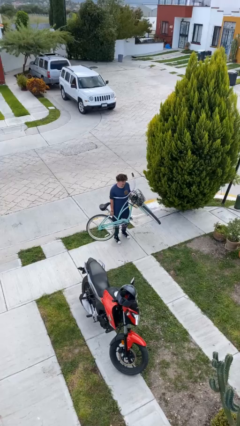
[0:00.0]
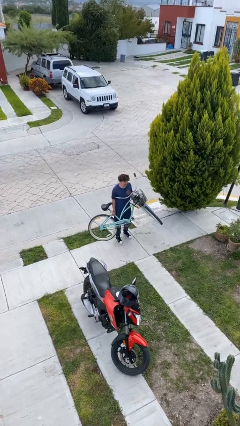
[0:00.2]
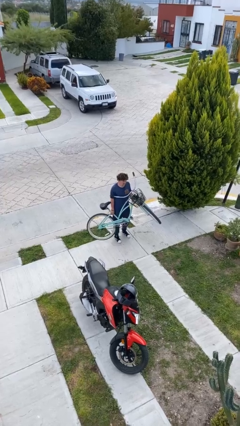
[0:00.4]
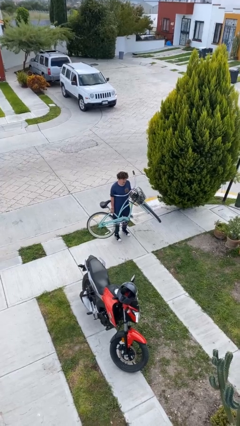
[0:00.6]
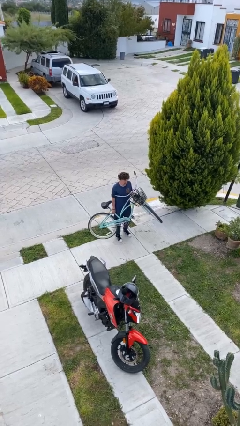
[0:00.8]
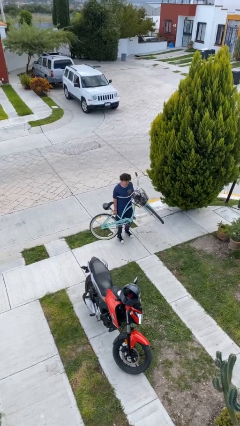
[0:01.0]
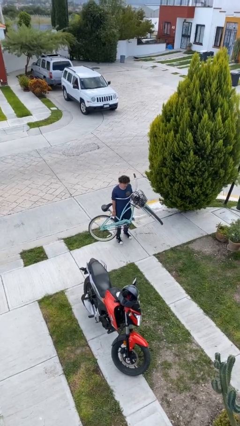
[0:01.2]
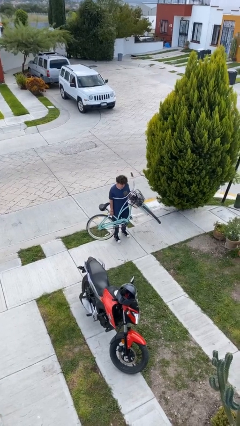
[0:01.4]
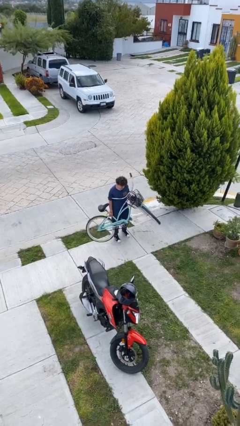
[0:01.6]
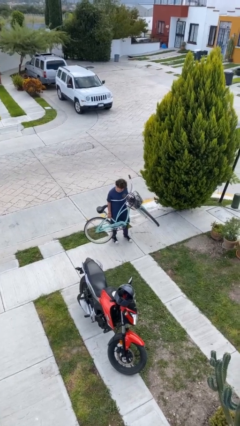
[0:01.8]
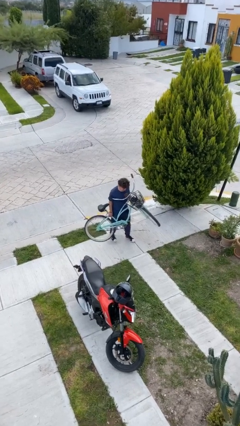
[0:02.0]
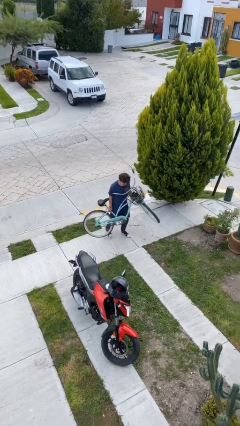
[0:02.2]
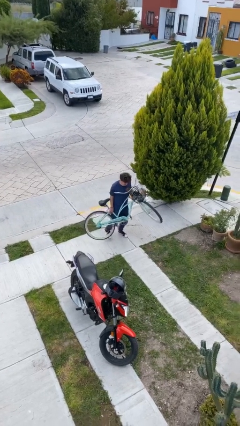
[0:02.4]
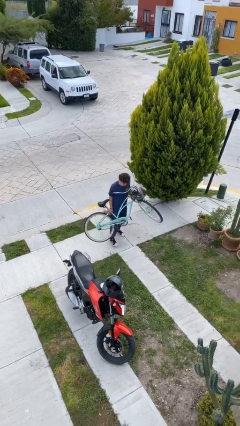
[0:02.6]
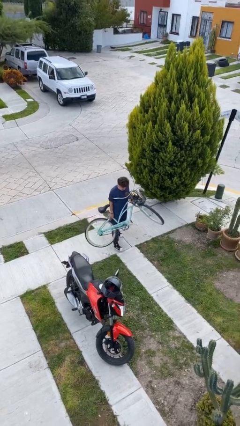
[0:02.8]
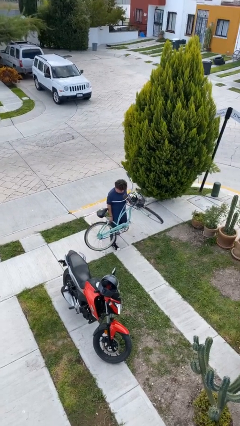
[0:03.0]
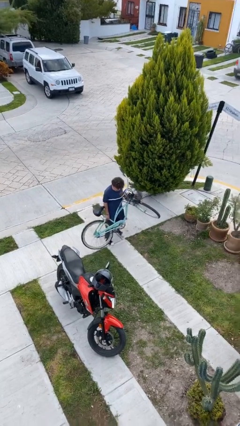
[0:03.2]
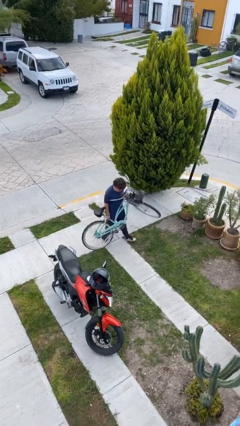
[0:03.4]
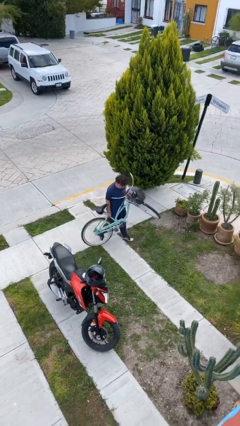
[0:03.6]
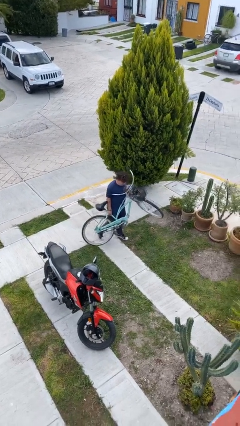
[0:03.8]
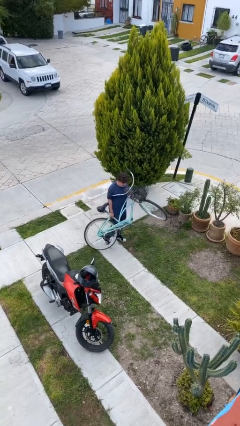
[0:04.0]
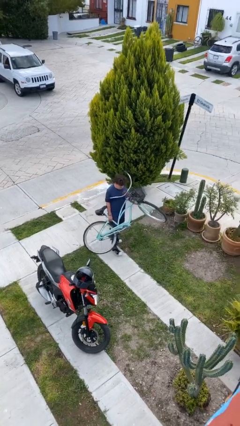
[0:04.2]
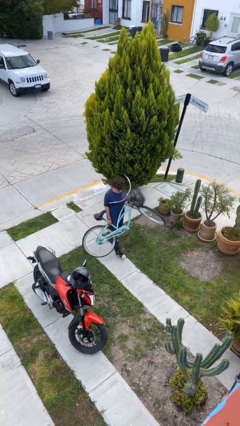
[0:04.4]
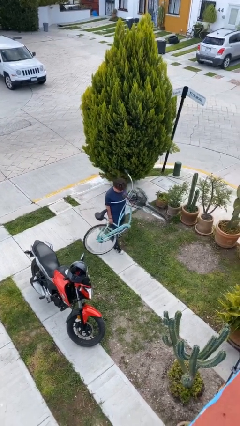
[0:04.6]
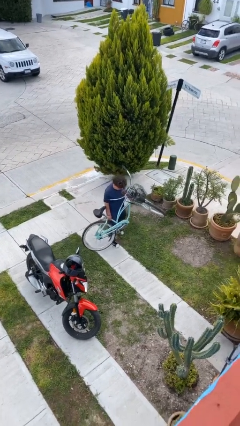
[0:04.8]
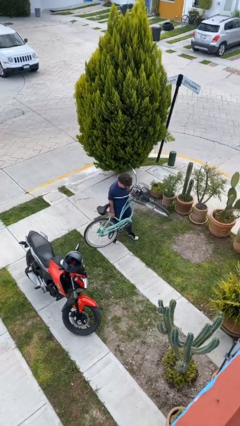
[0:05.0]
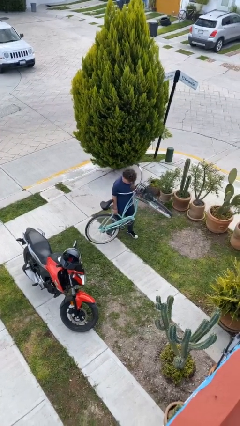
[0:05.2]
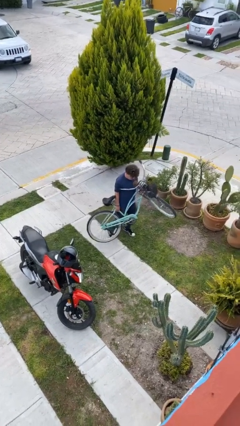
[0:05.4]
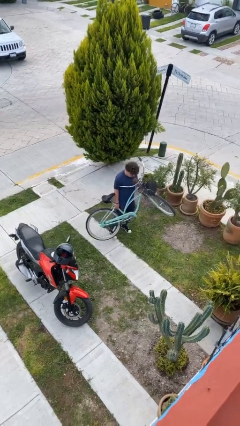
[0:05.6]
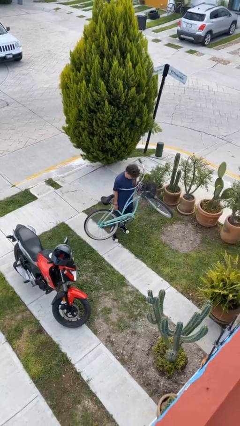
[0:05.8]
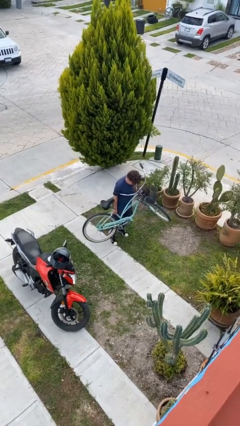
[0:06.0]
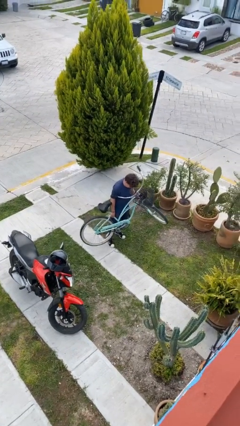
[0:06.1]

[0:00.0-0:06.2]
person carries heavy object

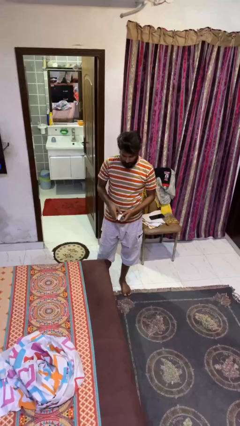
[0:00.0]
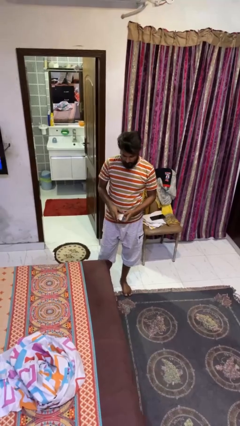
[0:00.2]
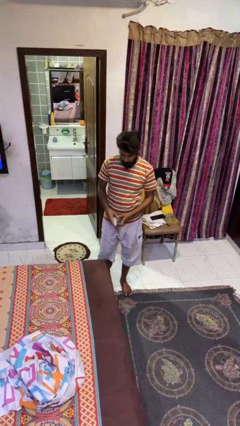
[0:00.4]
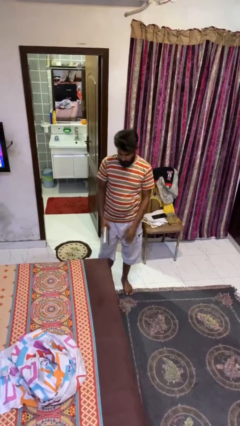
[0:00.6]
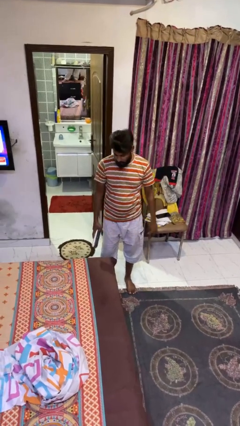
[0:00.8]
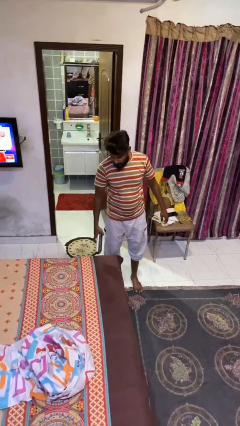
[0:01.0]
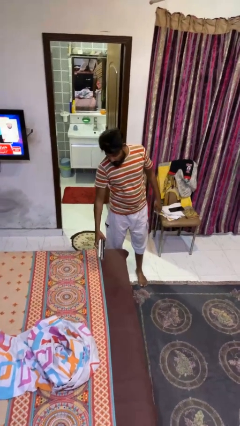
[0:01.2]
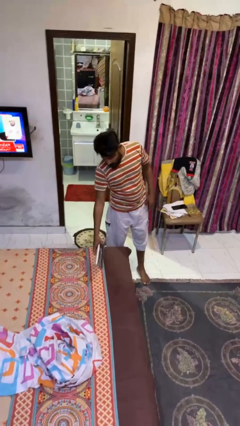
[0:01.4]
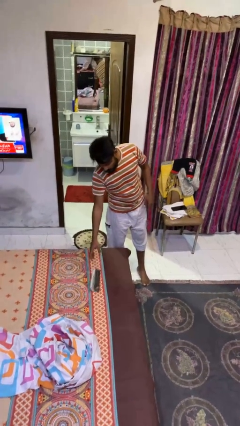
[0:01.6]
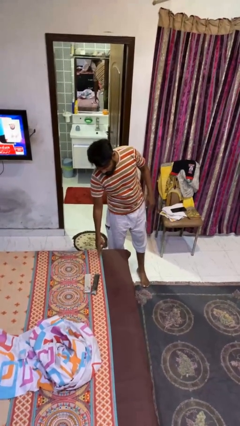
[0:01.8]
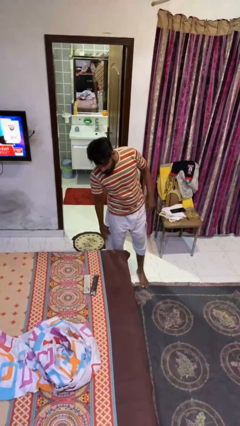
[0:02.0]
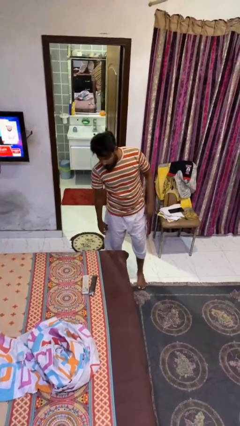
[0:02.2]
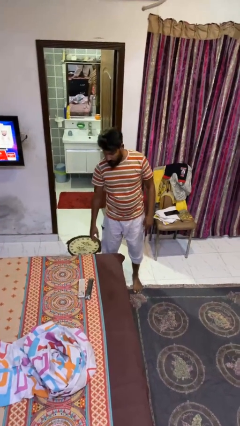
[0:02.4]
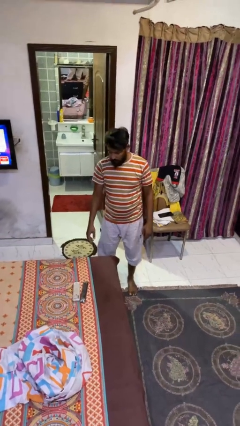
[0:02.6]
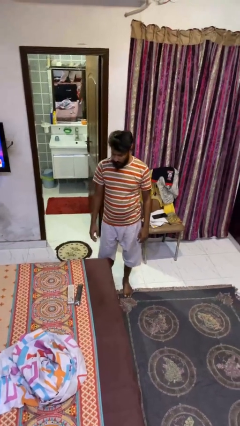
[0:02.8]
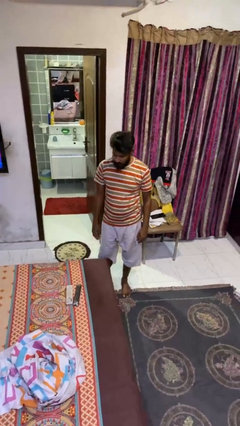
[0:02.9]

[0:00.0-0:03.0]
person puts down object on bed

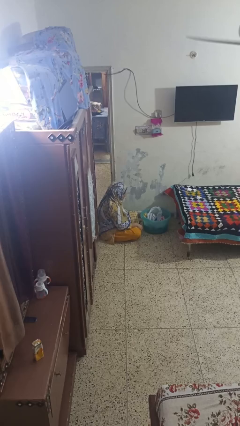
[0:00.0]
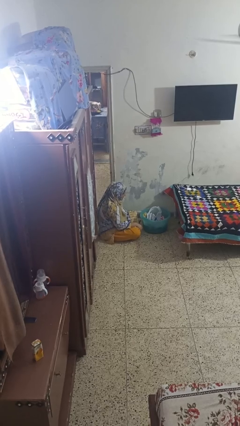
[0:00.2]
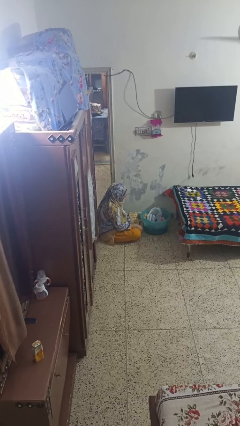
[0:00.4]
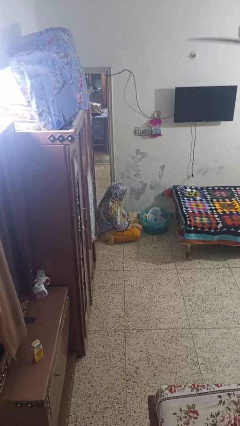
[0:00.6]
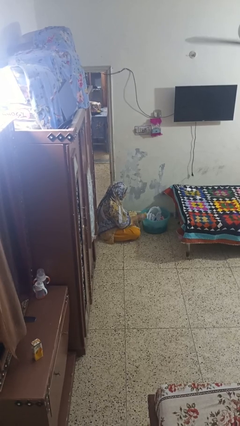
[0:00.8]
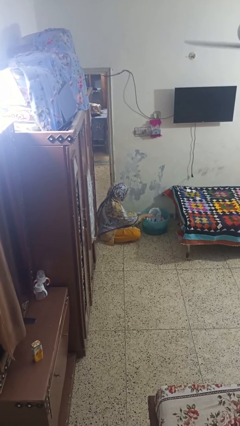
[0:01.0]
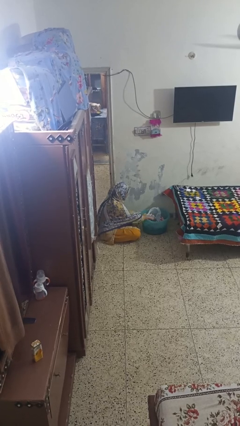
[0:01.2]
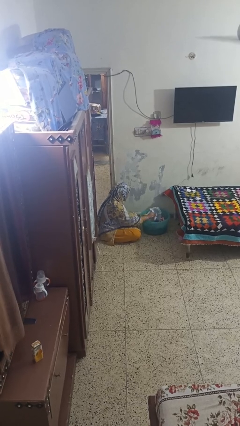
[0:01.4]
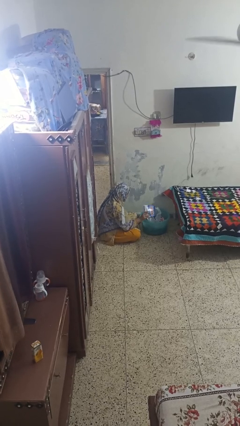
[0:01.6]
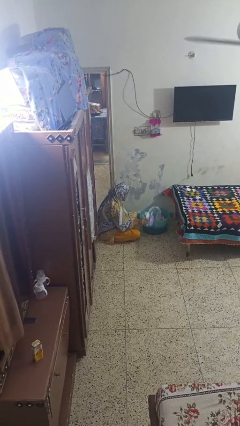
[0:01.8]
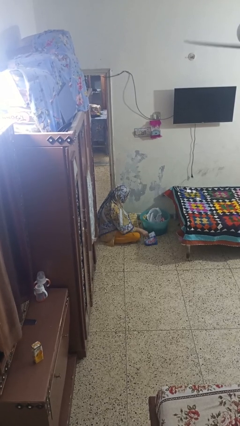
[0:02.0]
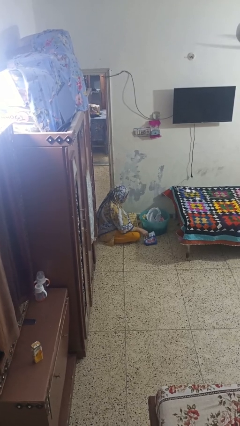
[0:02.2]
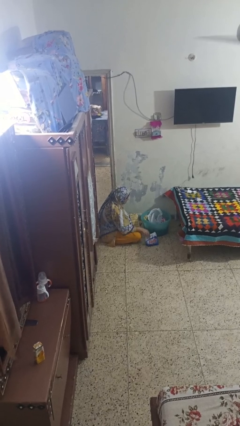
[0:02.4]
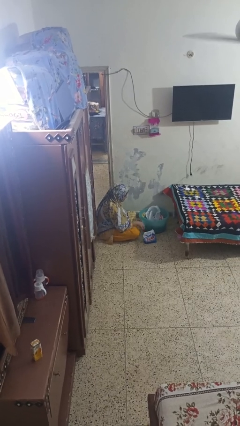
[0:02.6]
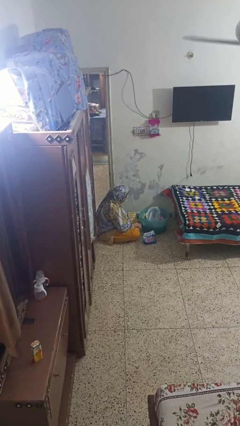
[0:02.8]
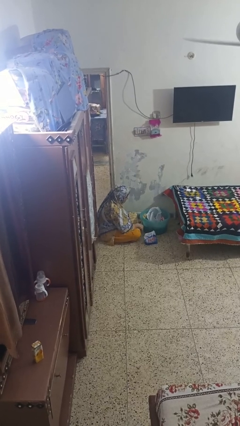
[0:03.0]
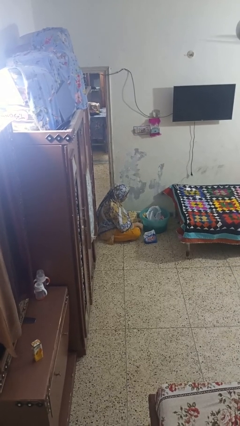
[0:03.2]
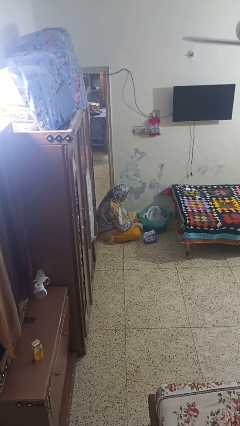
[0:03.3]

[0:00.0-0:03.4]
person takes object from basket

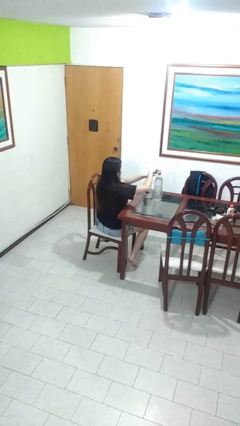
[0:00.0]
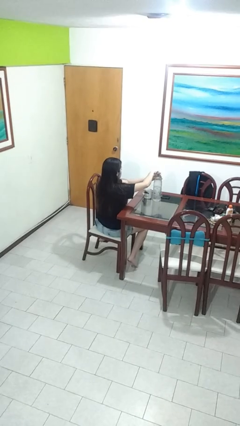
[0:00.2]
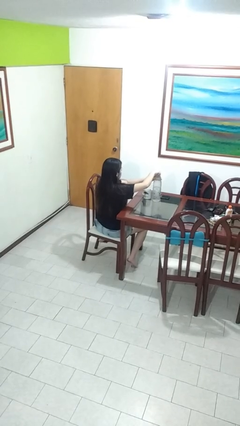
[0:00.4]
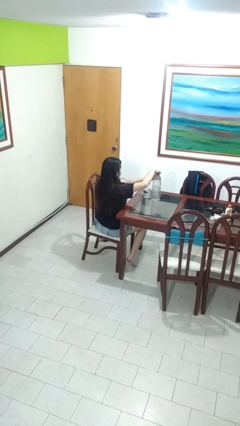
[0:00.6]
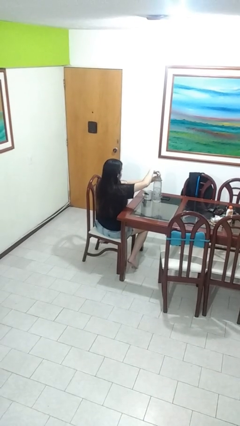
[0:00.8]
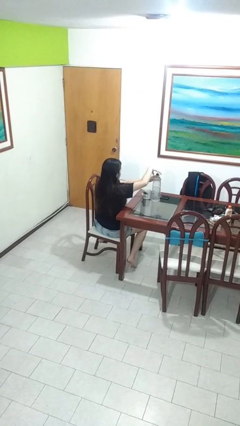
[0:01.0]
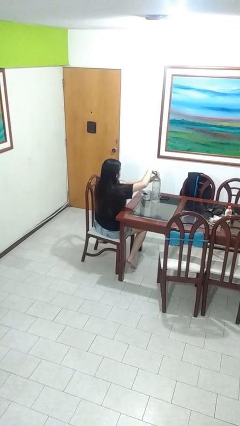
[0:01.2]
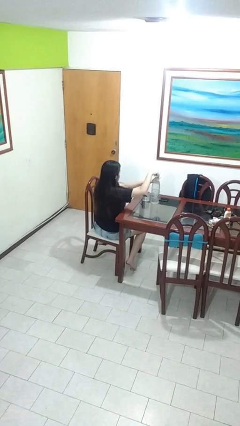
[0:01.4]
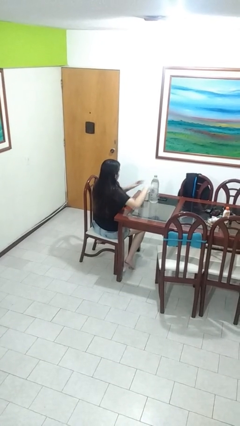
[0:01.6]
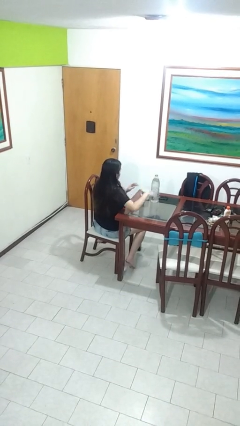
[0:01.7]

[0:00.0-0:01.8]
person unscrews lid from bottle

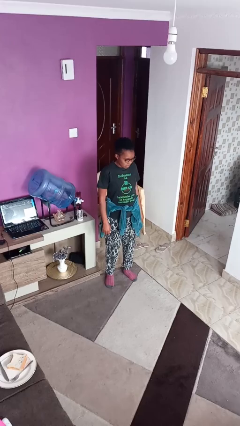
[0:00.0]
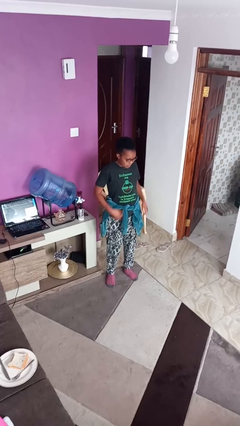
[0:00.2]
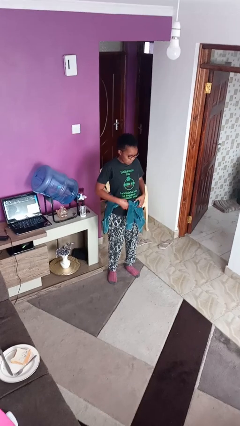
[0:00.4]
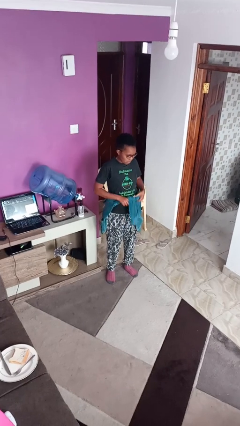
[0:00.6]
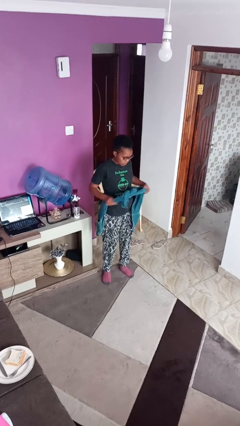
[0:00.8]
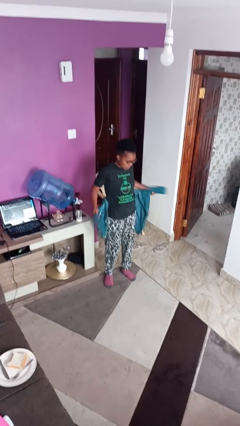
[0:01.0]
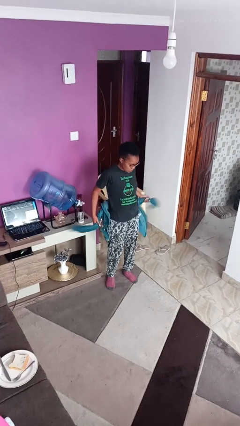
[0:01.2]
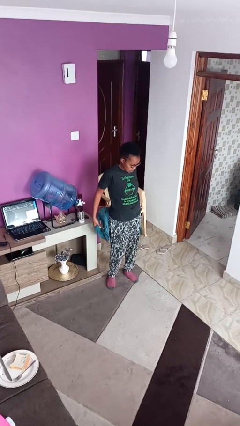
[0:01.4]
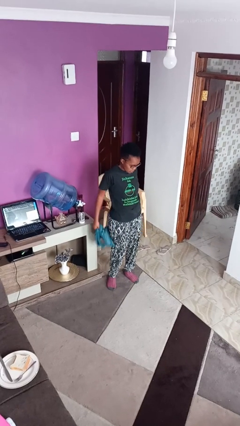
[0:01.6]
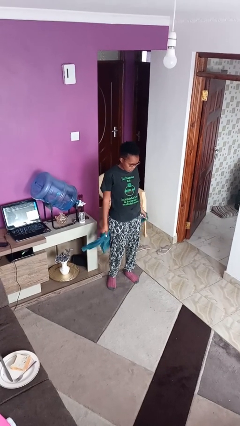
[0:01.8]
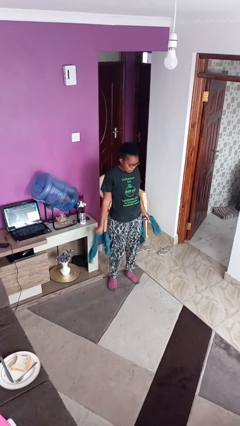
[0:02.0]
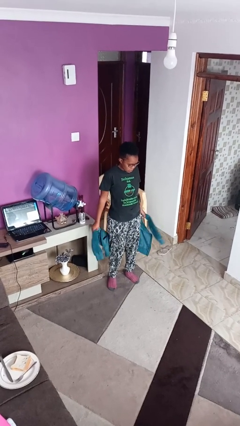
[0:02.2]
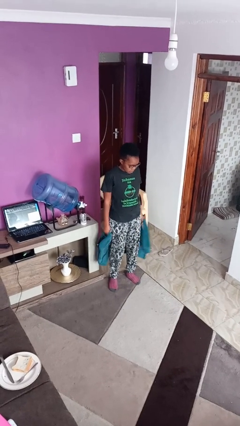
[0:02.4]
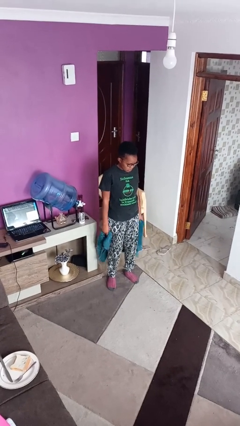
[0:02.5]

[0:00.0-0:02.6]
person unties jacket around waist

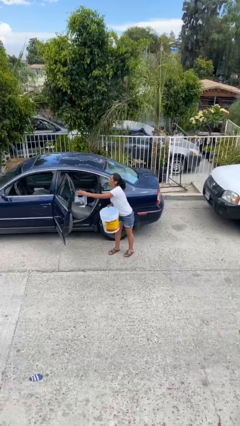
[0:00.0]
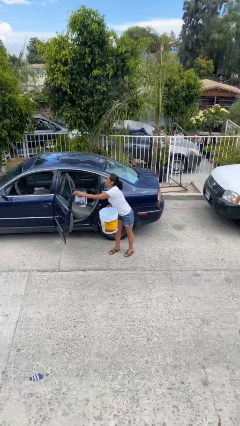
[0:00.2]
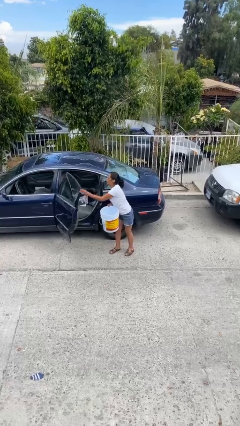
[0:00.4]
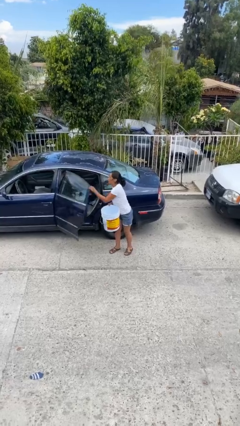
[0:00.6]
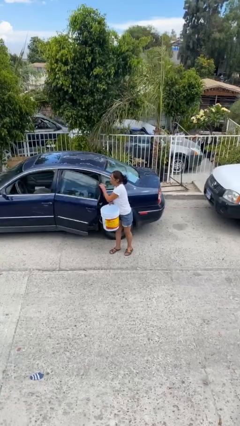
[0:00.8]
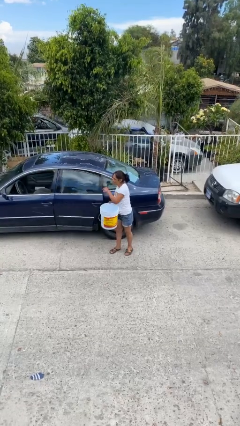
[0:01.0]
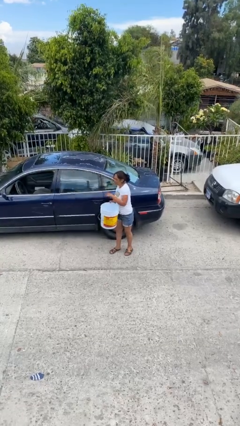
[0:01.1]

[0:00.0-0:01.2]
person closes car door
